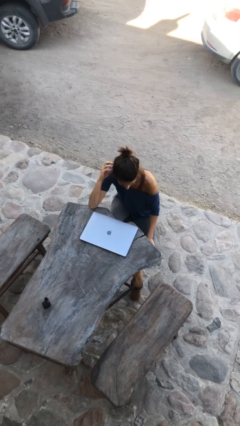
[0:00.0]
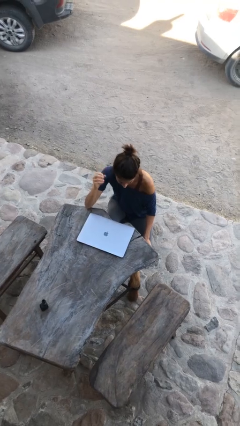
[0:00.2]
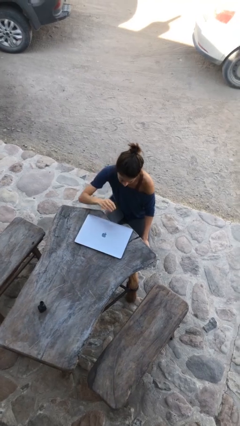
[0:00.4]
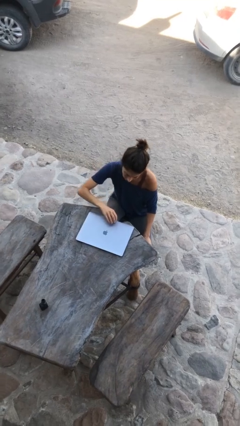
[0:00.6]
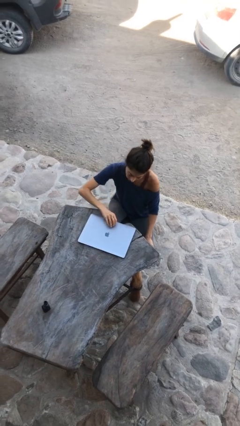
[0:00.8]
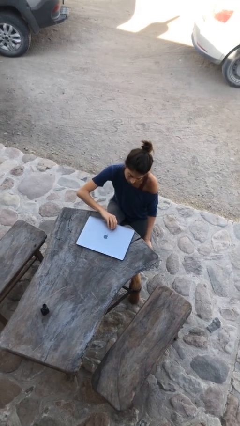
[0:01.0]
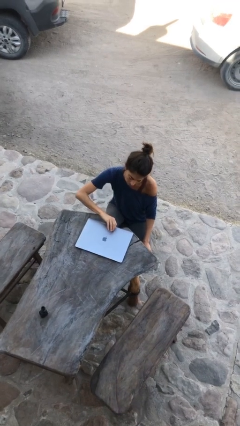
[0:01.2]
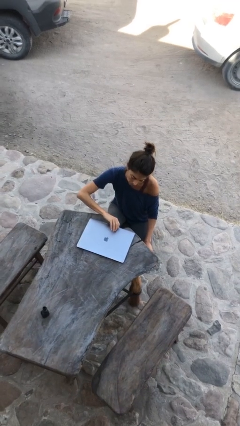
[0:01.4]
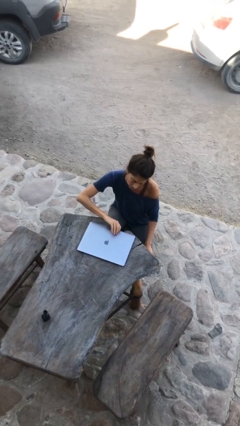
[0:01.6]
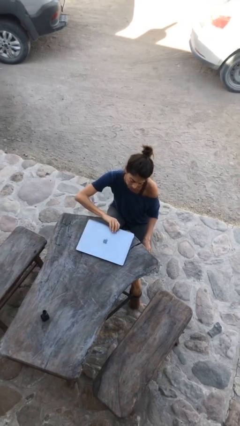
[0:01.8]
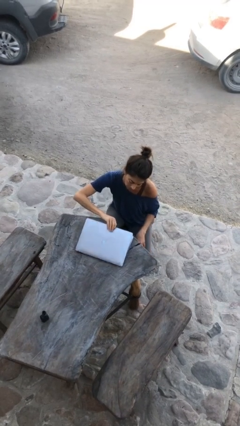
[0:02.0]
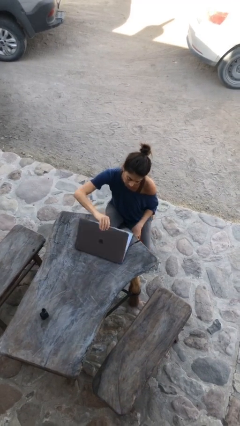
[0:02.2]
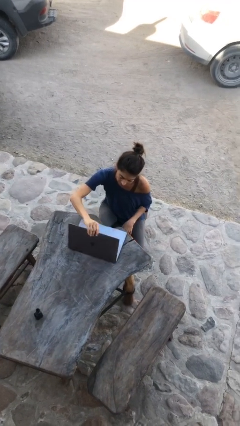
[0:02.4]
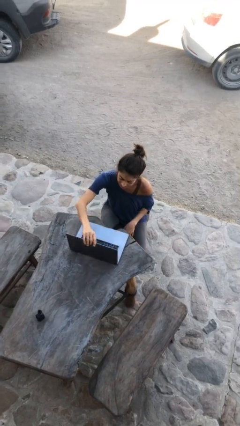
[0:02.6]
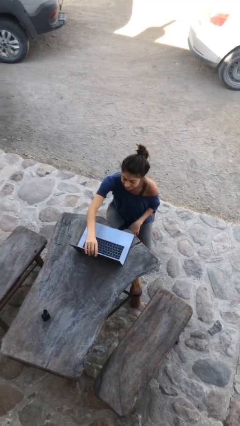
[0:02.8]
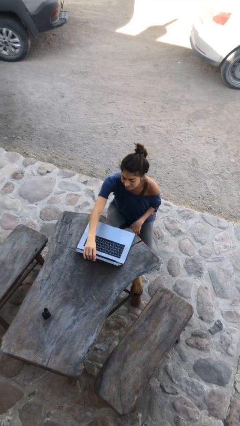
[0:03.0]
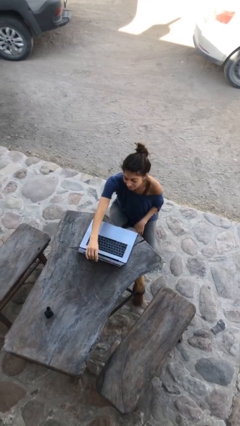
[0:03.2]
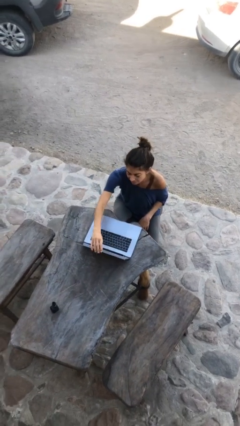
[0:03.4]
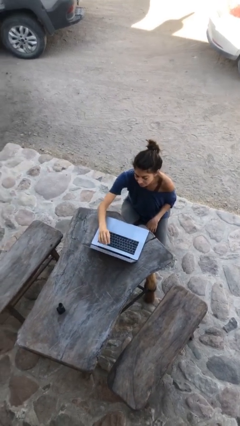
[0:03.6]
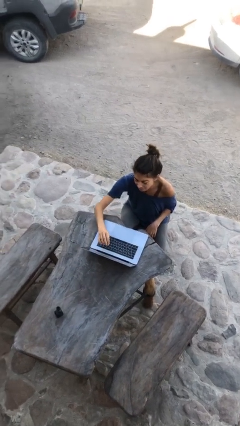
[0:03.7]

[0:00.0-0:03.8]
person interacts with laptop

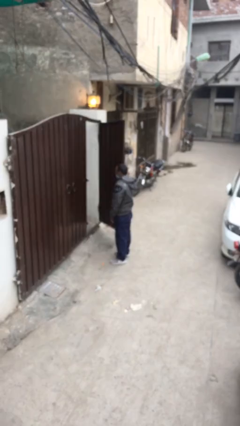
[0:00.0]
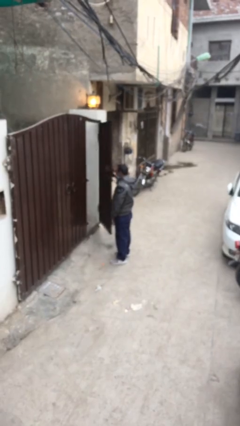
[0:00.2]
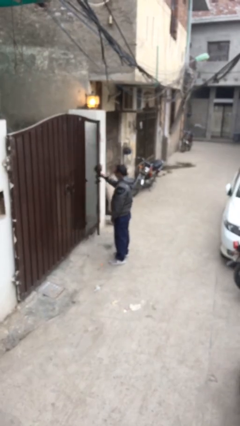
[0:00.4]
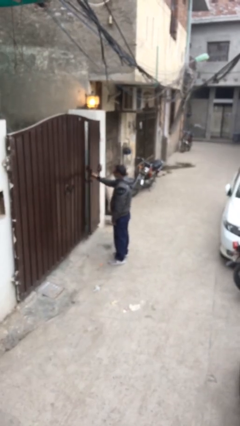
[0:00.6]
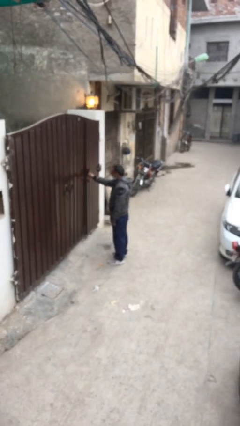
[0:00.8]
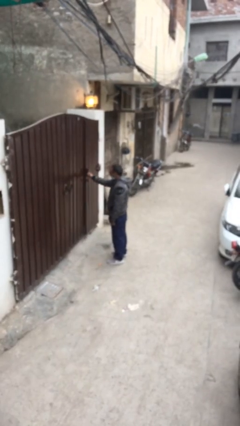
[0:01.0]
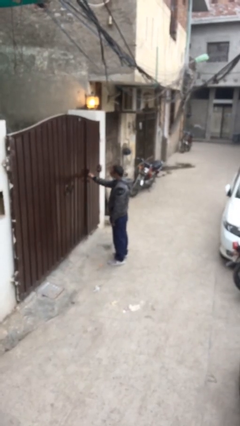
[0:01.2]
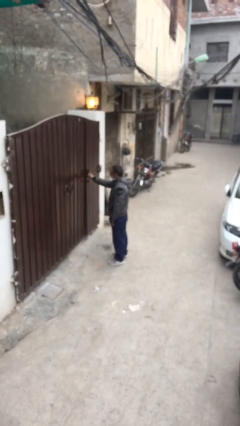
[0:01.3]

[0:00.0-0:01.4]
person closes facility door

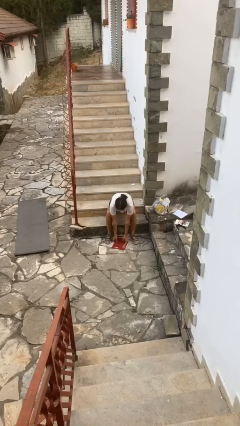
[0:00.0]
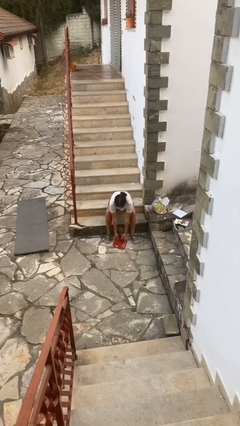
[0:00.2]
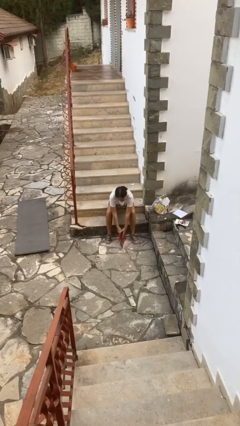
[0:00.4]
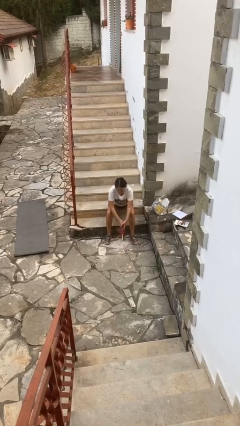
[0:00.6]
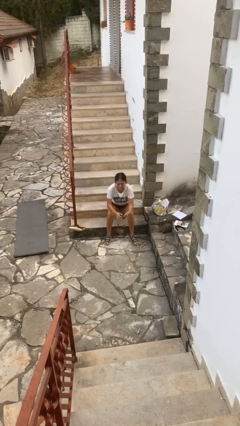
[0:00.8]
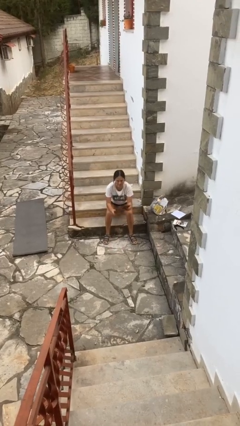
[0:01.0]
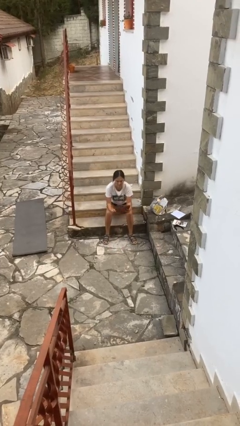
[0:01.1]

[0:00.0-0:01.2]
person picks up object from floor

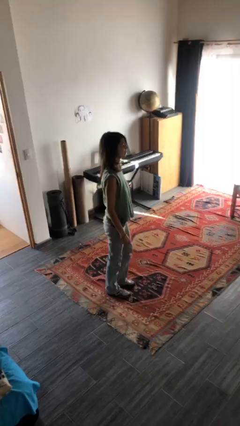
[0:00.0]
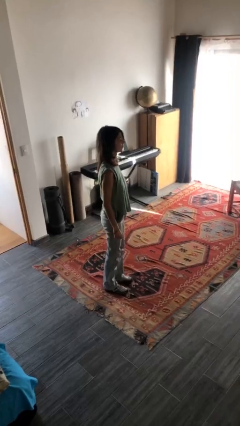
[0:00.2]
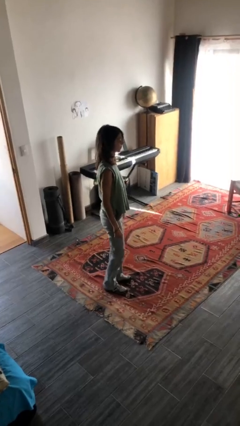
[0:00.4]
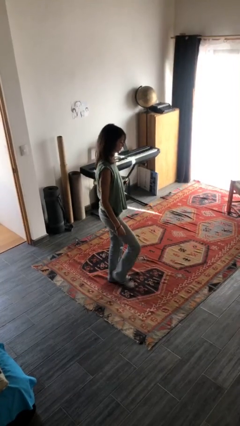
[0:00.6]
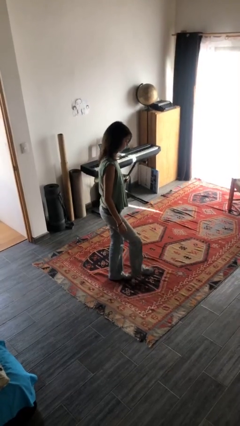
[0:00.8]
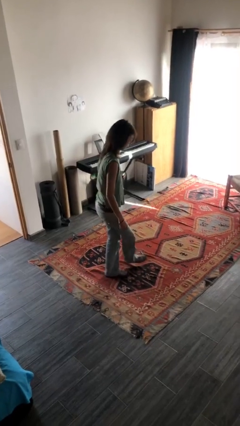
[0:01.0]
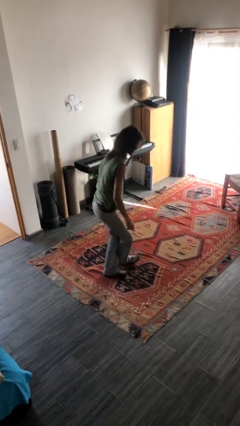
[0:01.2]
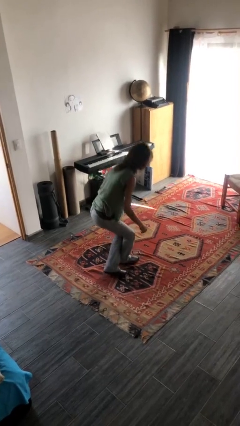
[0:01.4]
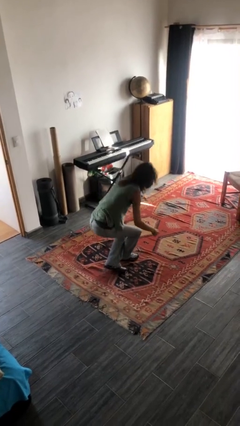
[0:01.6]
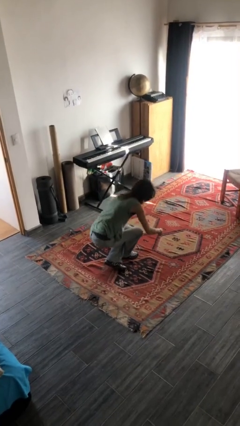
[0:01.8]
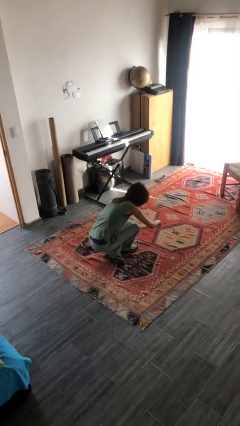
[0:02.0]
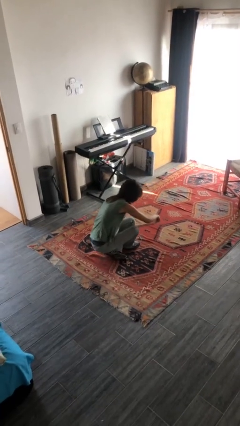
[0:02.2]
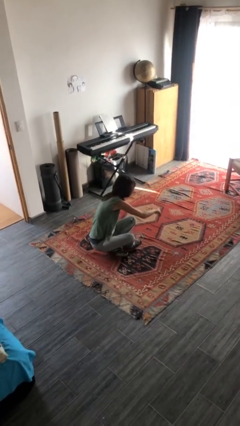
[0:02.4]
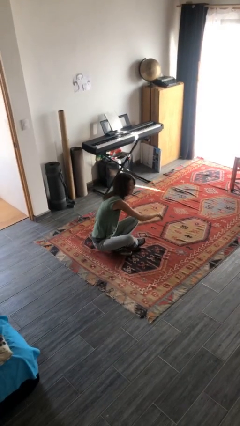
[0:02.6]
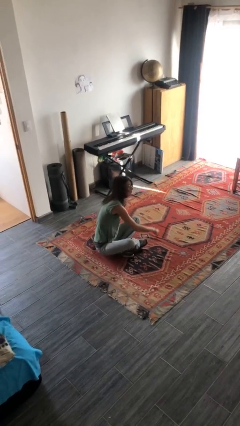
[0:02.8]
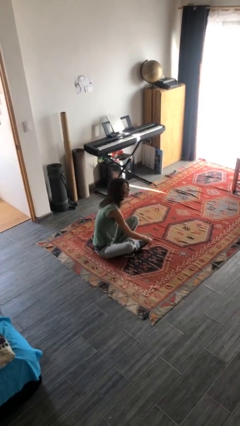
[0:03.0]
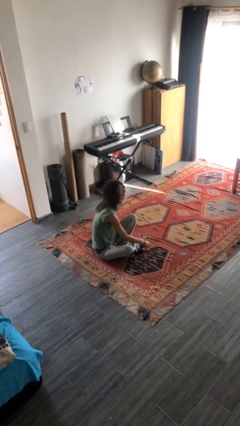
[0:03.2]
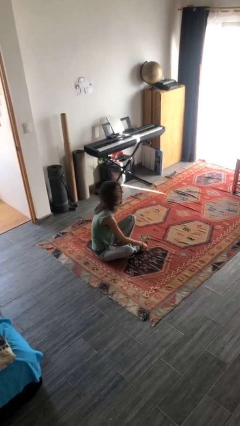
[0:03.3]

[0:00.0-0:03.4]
person sits crisscross

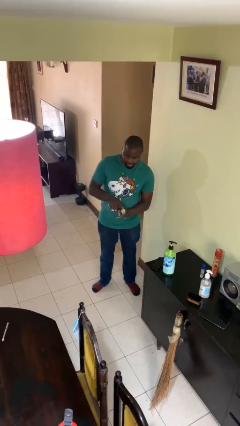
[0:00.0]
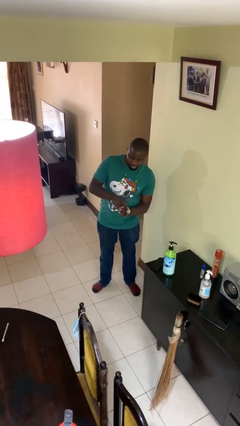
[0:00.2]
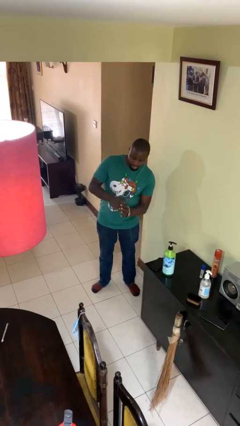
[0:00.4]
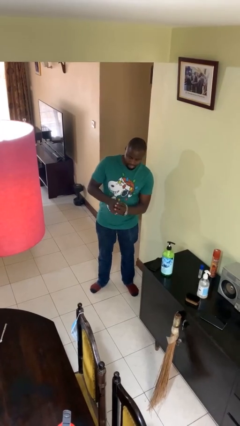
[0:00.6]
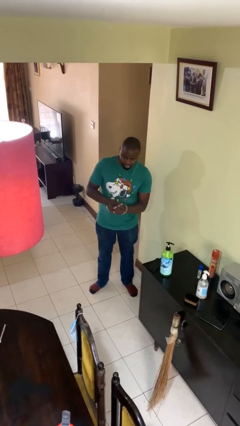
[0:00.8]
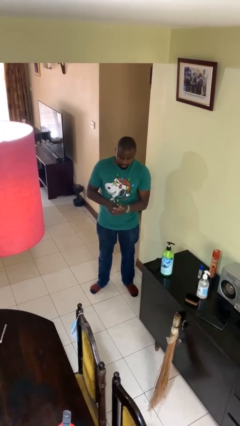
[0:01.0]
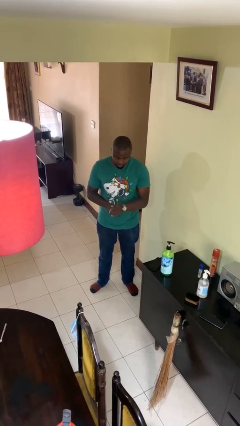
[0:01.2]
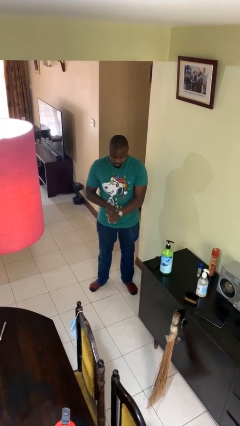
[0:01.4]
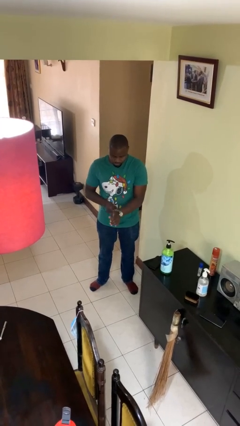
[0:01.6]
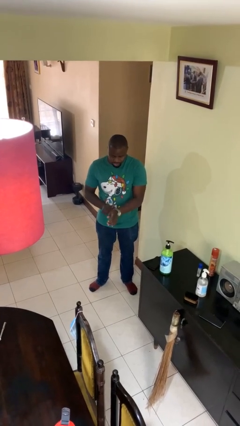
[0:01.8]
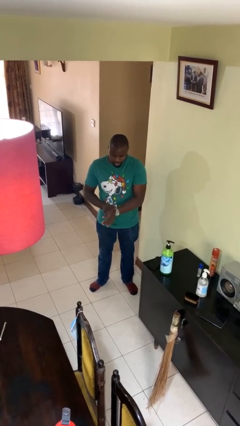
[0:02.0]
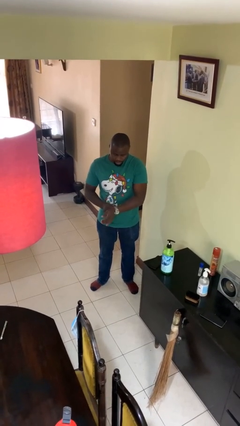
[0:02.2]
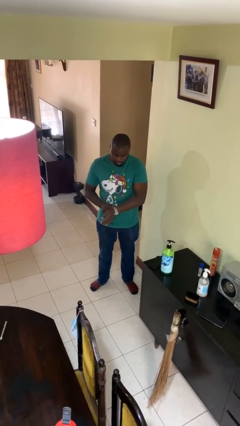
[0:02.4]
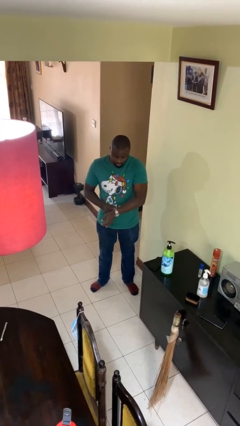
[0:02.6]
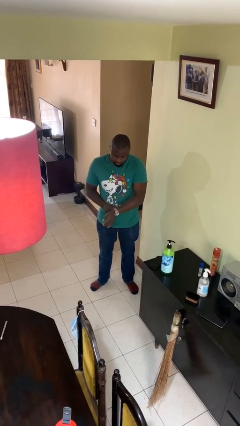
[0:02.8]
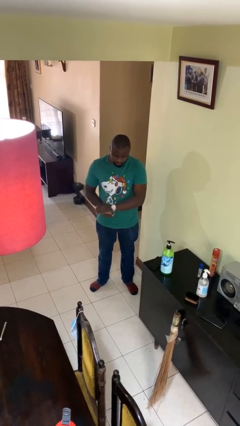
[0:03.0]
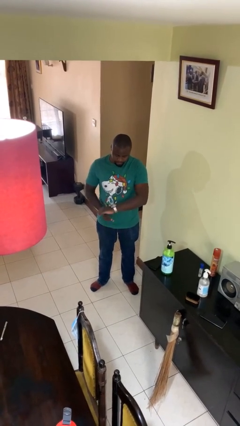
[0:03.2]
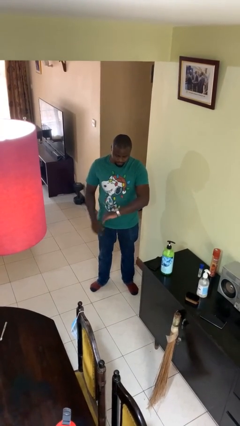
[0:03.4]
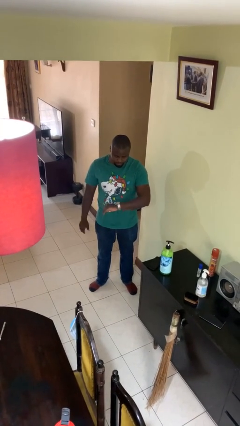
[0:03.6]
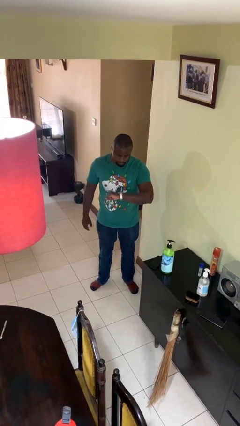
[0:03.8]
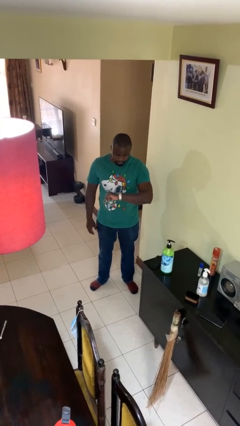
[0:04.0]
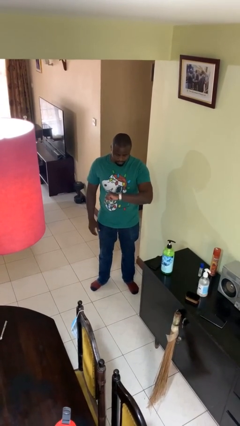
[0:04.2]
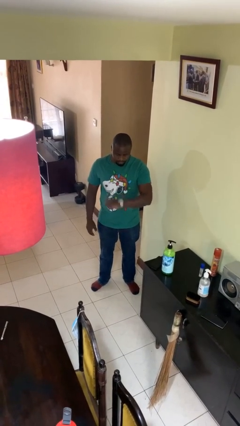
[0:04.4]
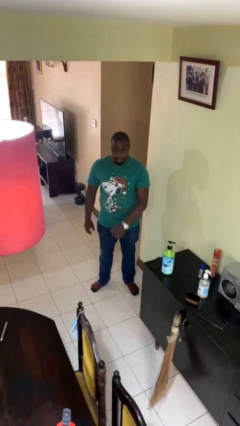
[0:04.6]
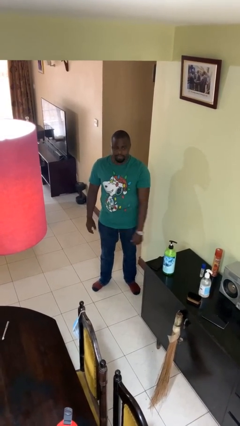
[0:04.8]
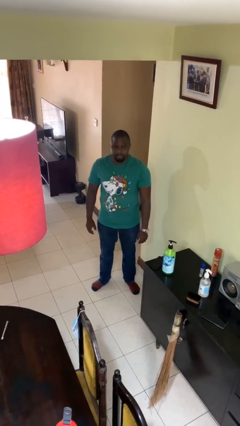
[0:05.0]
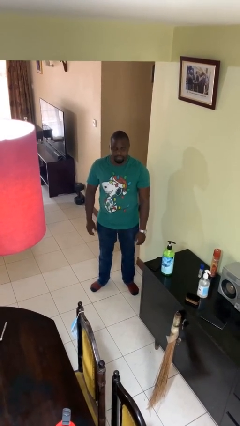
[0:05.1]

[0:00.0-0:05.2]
person puts on wristwatch

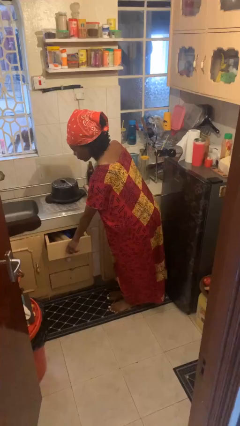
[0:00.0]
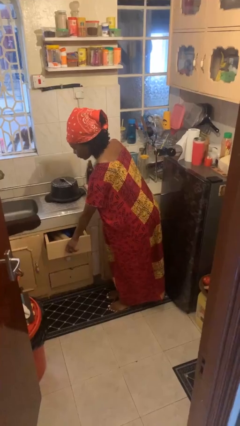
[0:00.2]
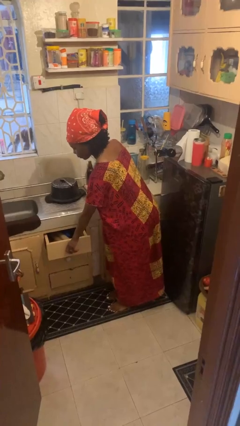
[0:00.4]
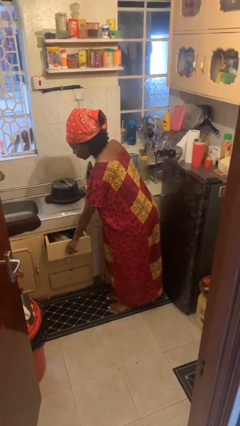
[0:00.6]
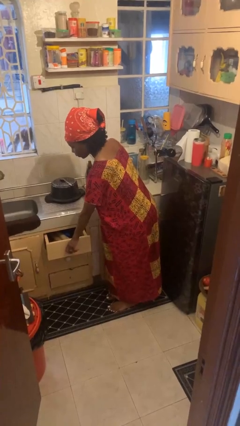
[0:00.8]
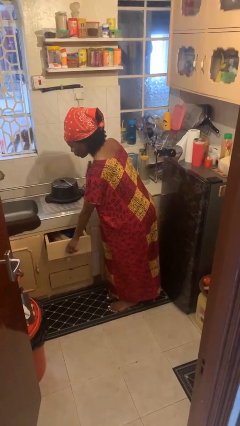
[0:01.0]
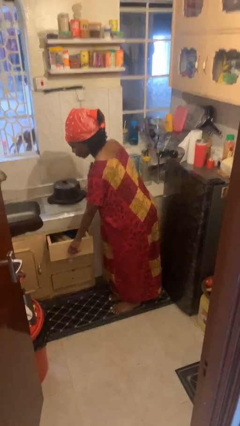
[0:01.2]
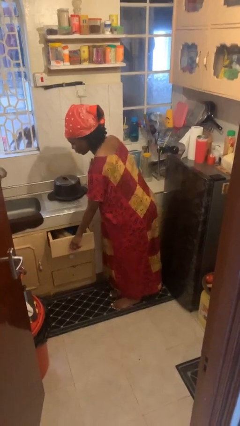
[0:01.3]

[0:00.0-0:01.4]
person opens kitchen drawer

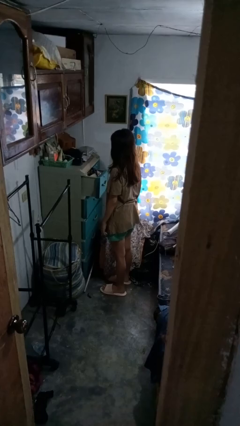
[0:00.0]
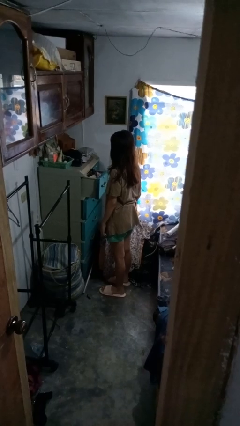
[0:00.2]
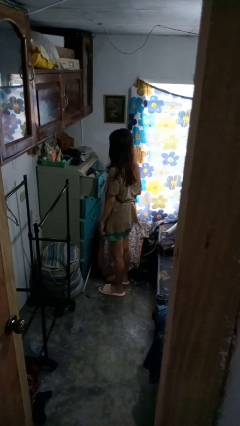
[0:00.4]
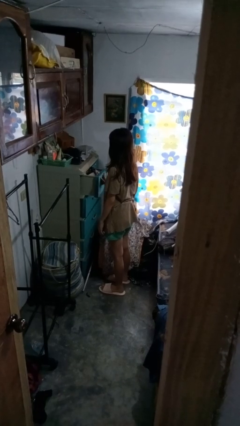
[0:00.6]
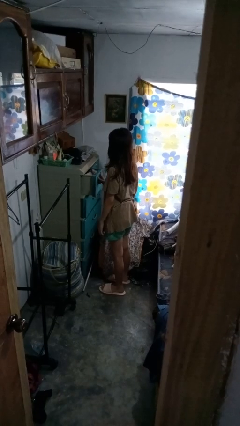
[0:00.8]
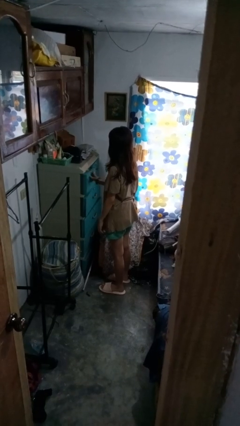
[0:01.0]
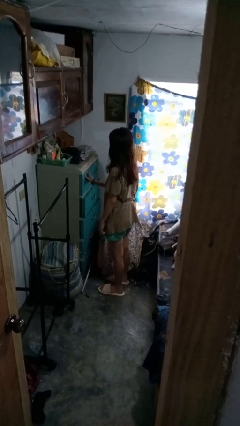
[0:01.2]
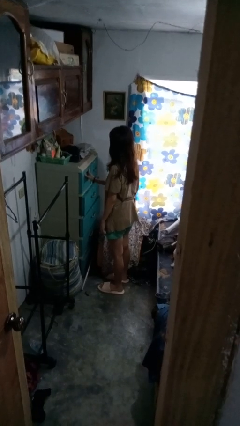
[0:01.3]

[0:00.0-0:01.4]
person closes dresser drawer
